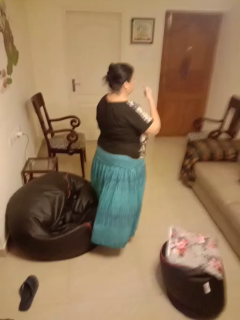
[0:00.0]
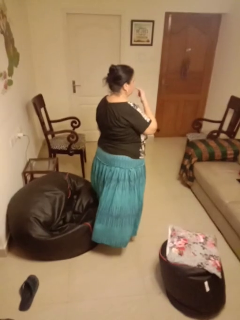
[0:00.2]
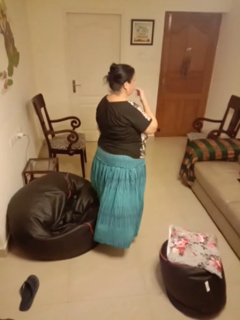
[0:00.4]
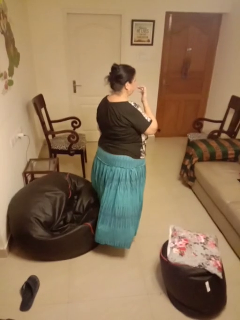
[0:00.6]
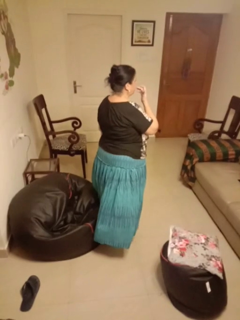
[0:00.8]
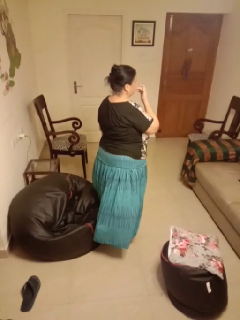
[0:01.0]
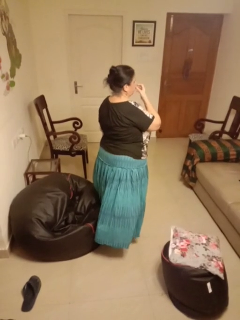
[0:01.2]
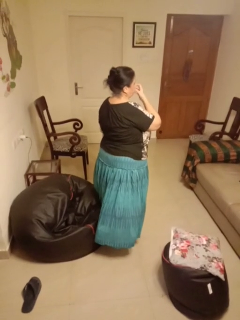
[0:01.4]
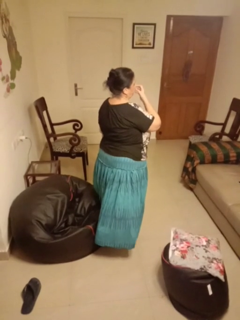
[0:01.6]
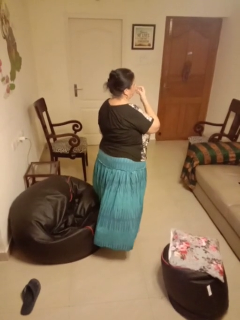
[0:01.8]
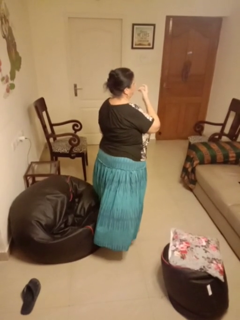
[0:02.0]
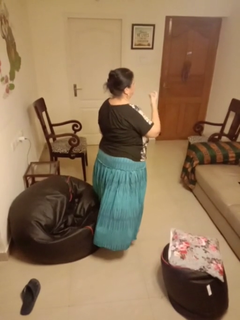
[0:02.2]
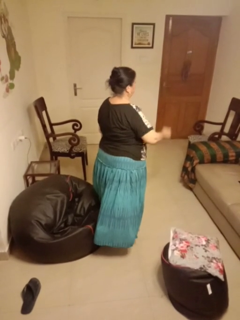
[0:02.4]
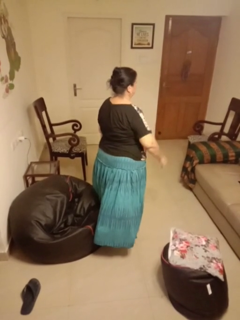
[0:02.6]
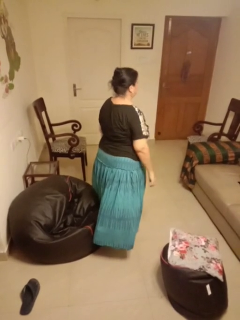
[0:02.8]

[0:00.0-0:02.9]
person licks fingers

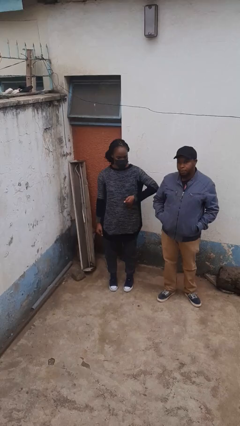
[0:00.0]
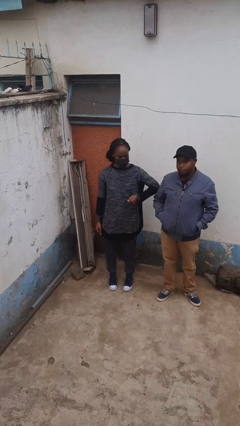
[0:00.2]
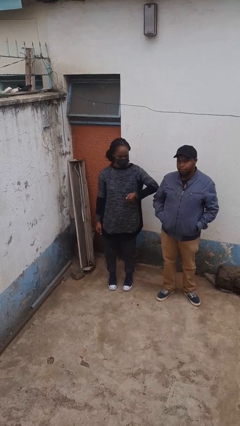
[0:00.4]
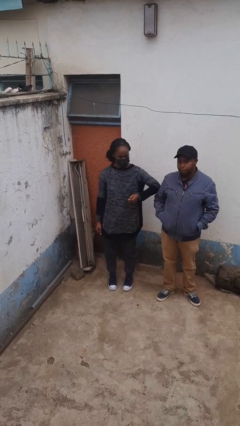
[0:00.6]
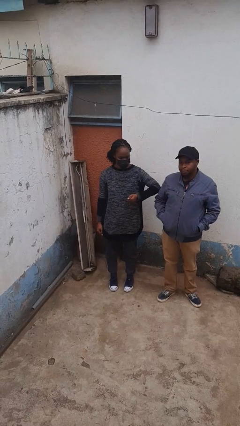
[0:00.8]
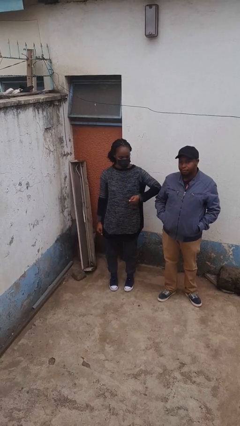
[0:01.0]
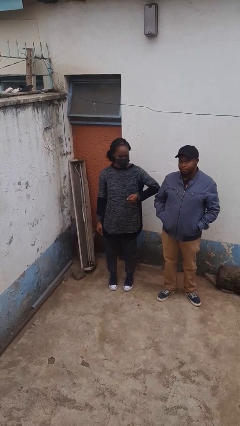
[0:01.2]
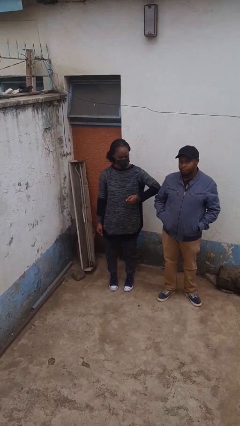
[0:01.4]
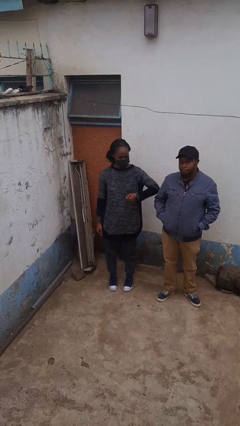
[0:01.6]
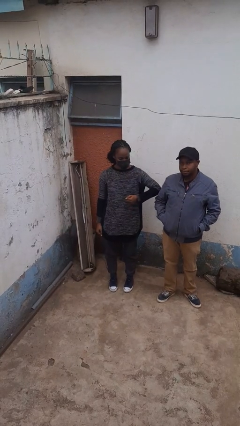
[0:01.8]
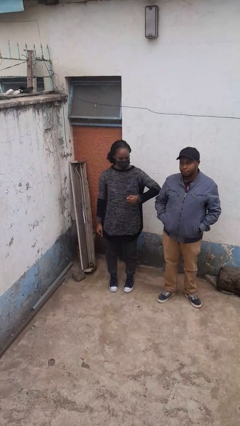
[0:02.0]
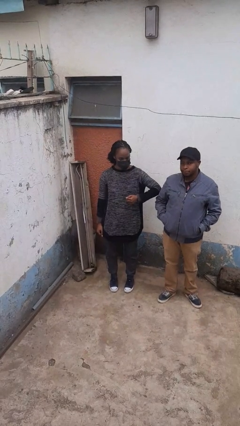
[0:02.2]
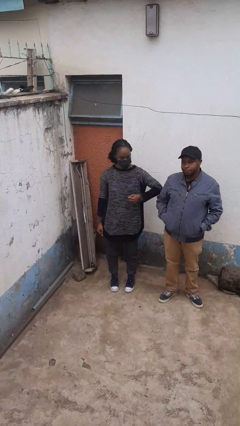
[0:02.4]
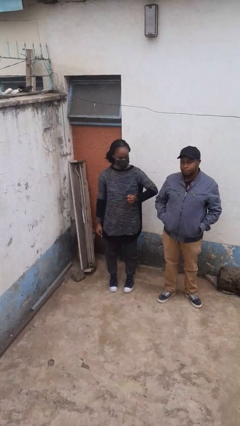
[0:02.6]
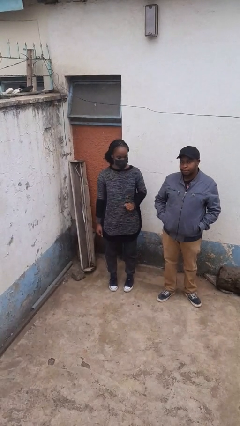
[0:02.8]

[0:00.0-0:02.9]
person nudges person with elbow

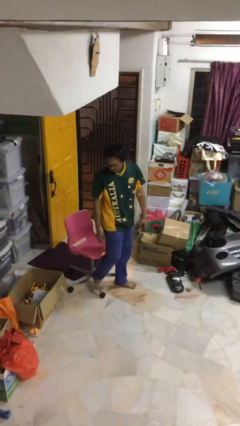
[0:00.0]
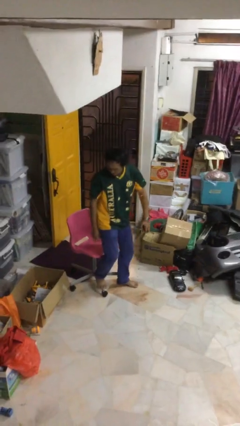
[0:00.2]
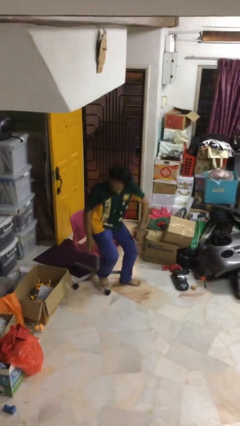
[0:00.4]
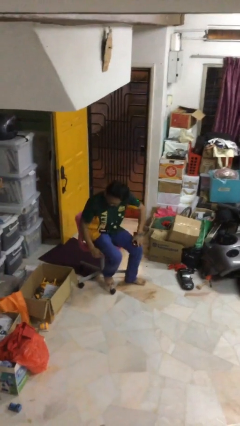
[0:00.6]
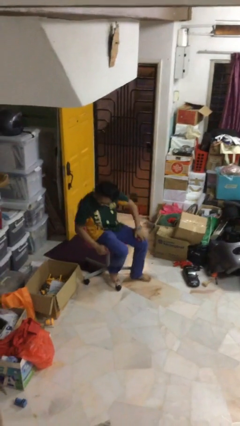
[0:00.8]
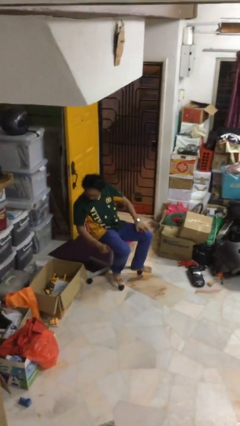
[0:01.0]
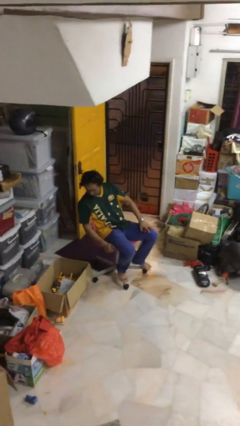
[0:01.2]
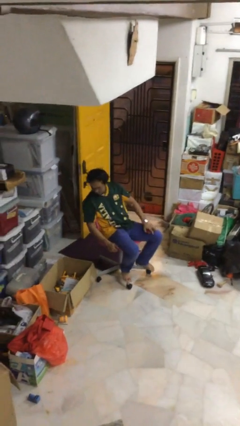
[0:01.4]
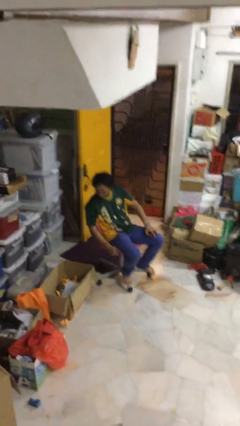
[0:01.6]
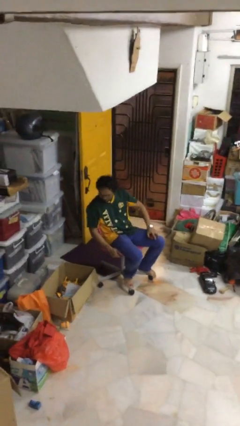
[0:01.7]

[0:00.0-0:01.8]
person sits down

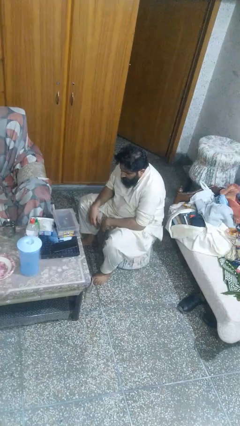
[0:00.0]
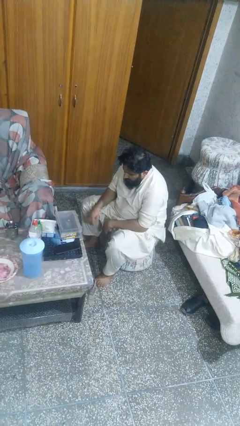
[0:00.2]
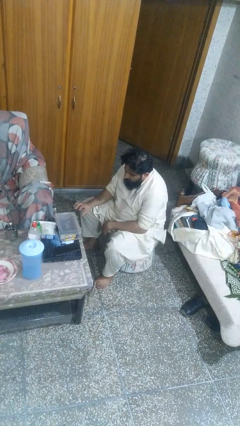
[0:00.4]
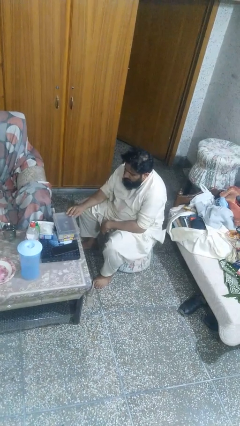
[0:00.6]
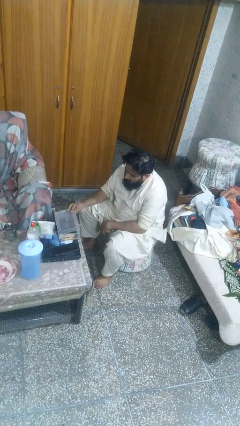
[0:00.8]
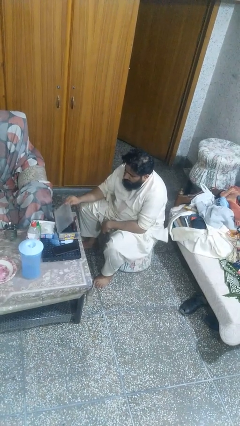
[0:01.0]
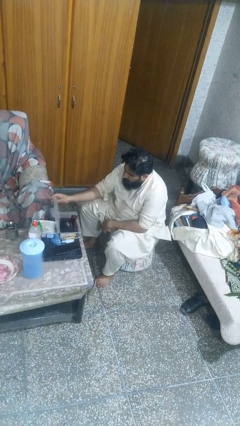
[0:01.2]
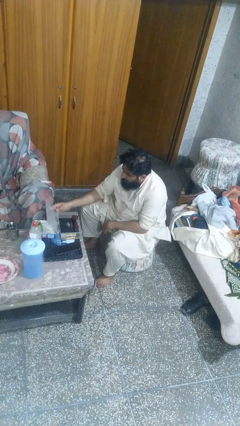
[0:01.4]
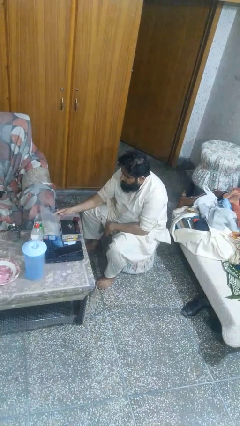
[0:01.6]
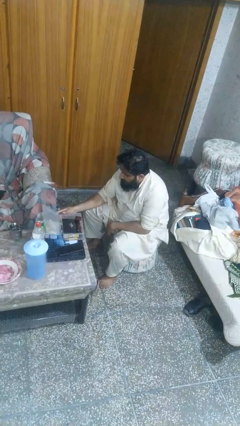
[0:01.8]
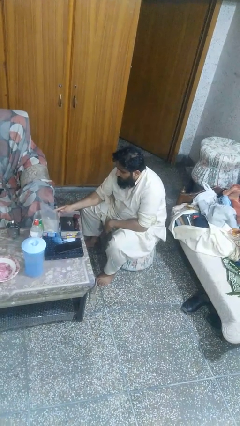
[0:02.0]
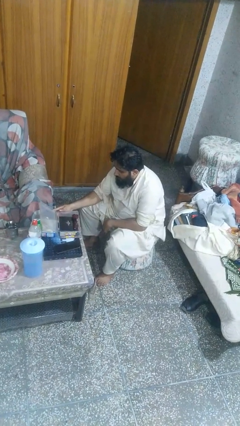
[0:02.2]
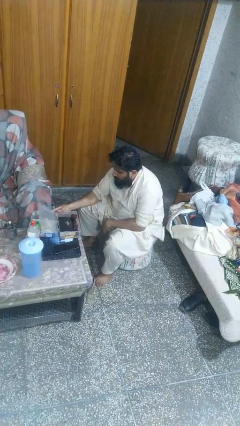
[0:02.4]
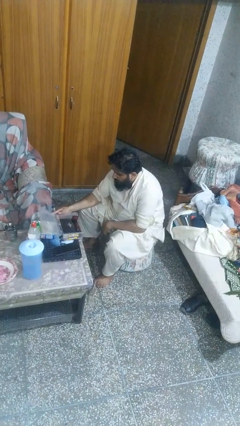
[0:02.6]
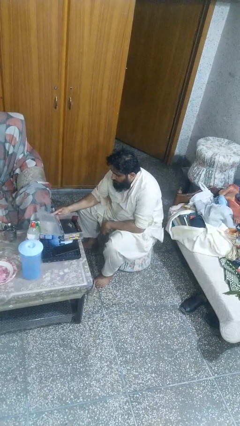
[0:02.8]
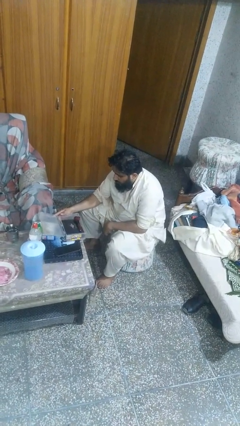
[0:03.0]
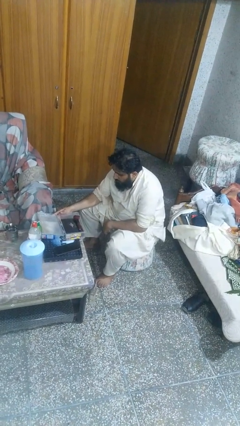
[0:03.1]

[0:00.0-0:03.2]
person opens jewelry box

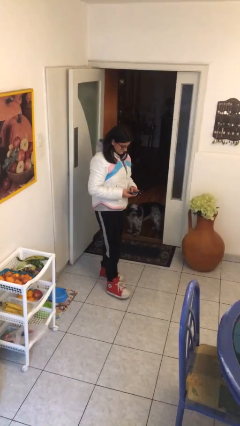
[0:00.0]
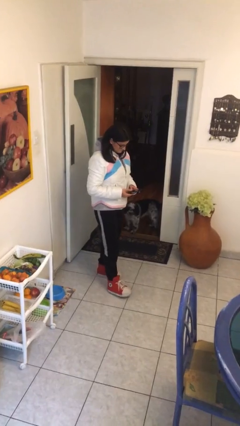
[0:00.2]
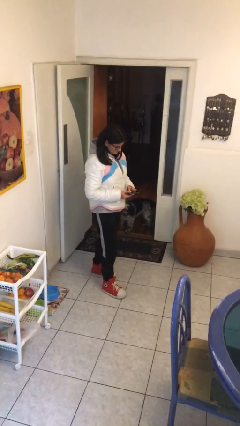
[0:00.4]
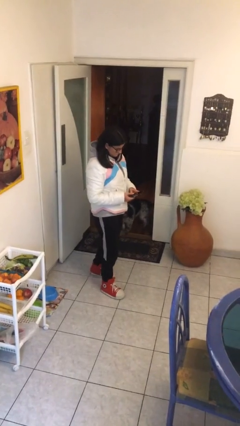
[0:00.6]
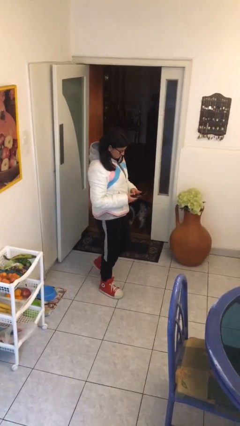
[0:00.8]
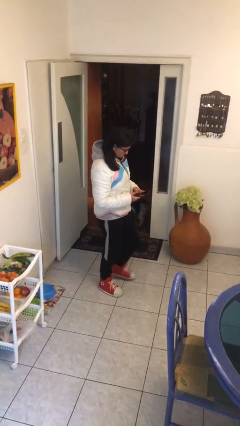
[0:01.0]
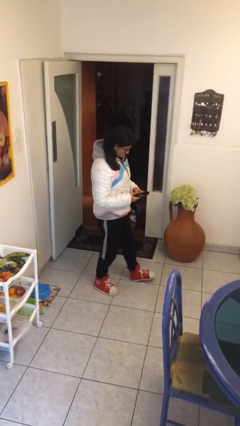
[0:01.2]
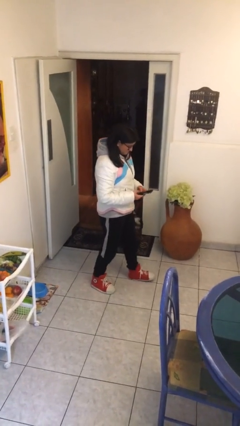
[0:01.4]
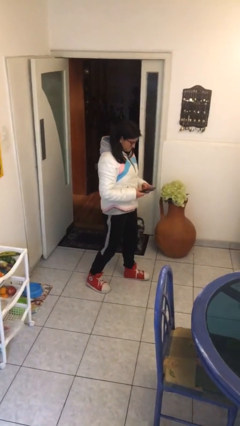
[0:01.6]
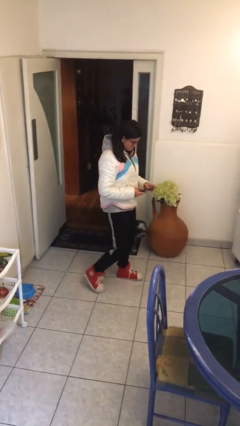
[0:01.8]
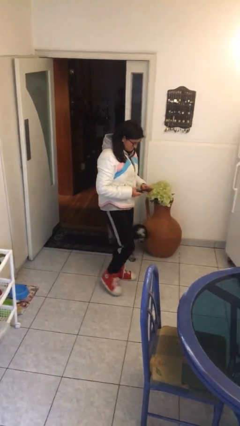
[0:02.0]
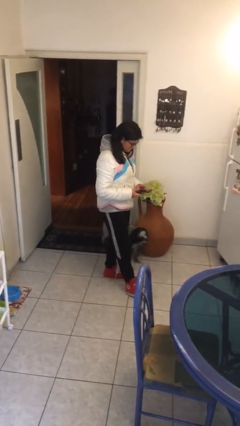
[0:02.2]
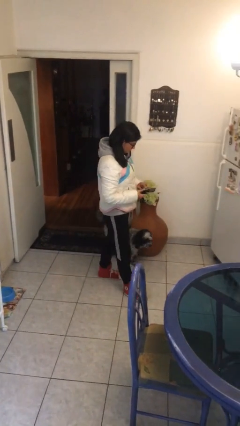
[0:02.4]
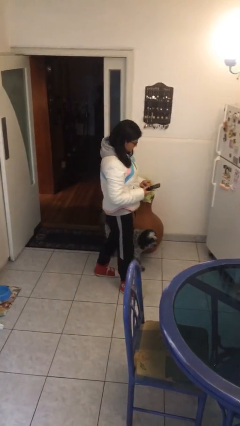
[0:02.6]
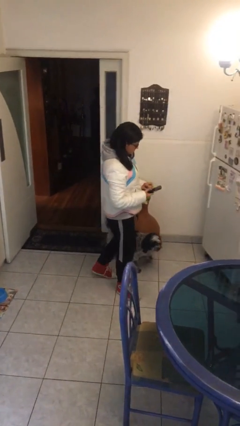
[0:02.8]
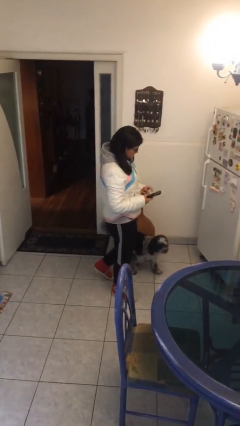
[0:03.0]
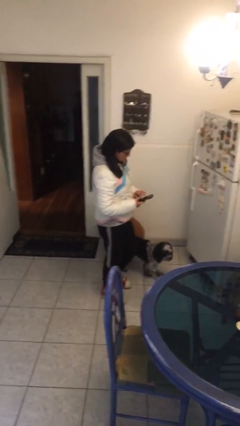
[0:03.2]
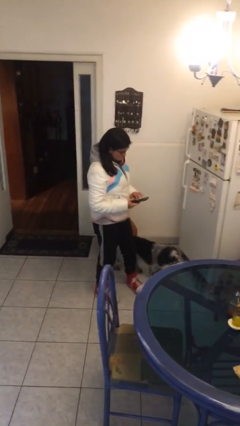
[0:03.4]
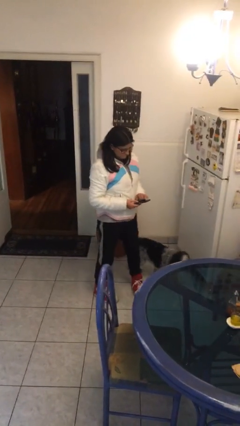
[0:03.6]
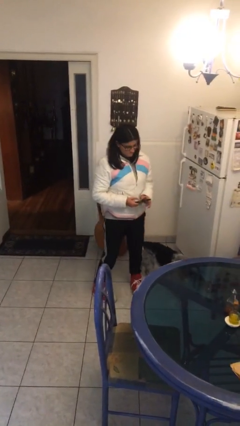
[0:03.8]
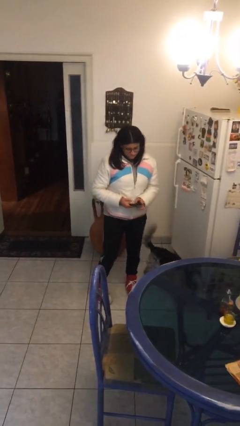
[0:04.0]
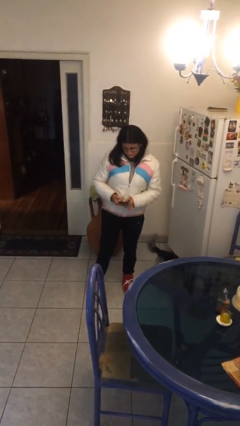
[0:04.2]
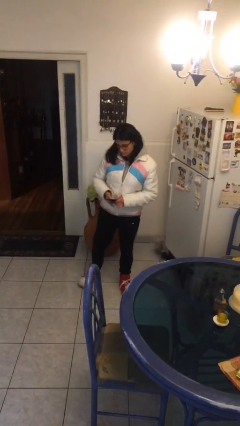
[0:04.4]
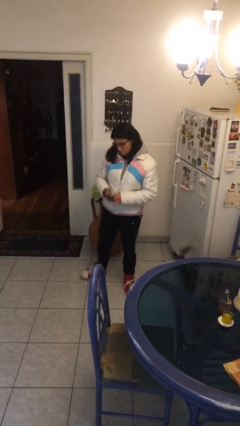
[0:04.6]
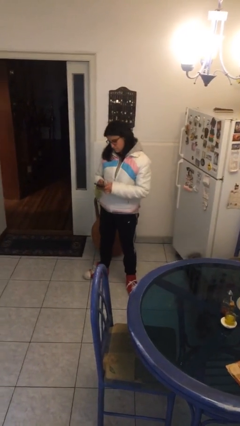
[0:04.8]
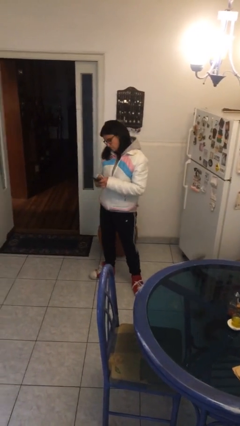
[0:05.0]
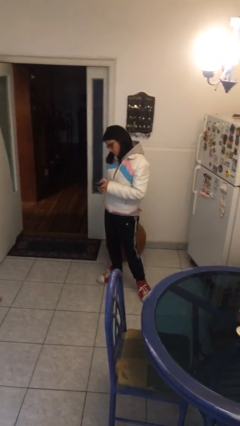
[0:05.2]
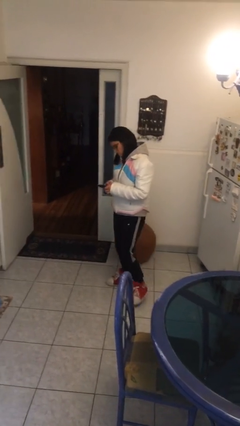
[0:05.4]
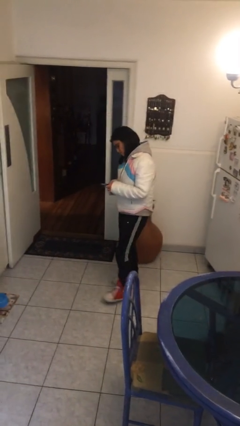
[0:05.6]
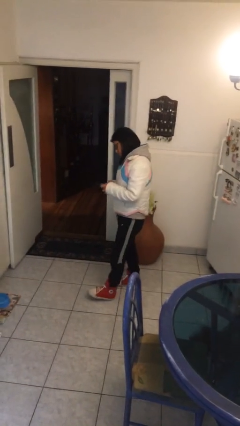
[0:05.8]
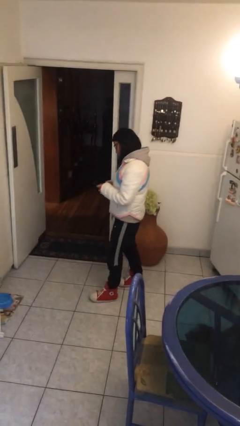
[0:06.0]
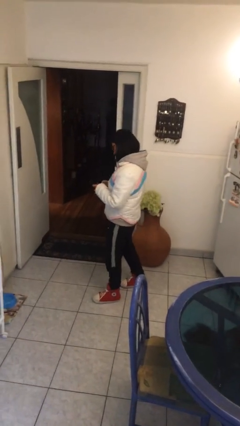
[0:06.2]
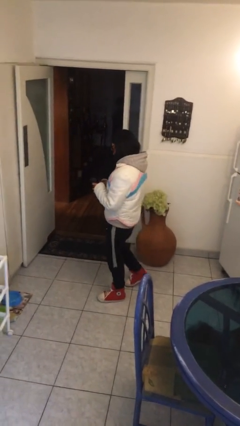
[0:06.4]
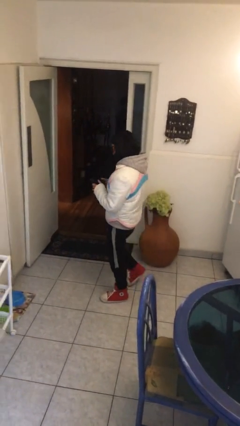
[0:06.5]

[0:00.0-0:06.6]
person texts on phone

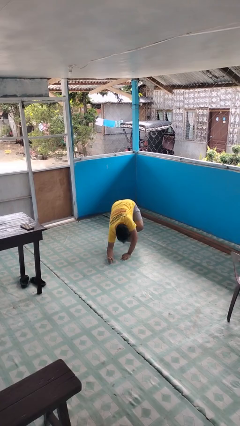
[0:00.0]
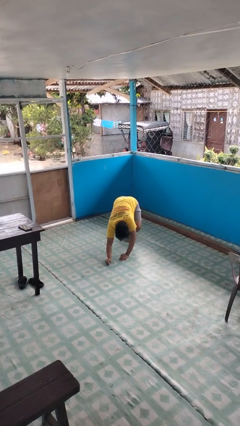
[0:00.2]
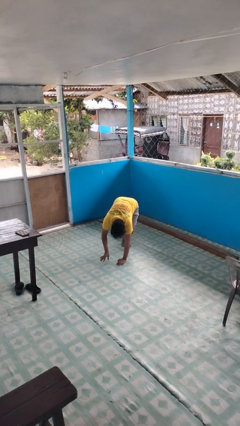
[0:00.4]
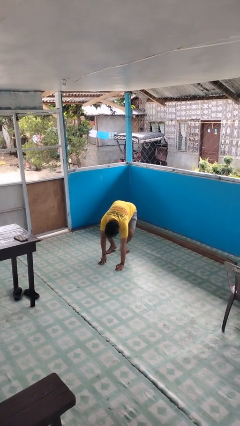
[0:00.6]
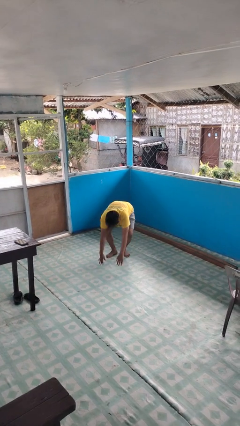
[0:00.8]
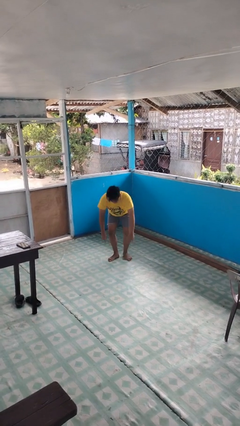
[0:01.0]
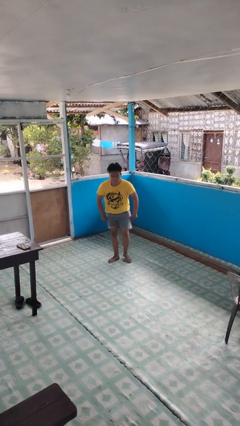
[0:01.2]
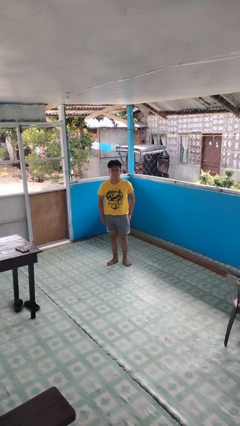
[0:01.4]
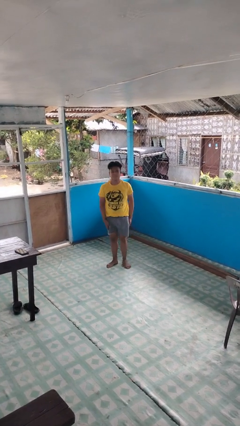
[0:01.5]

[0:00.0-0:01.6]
person stands up from floor
